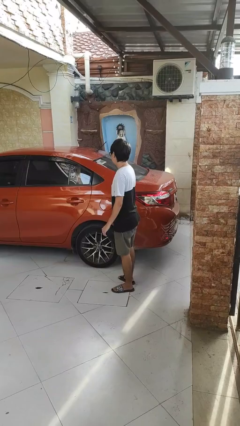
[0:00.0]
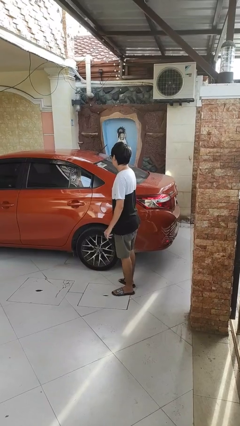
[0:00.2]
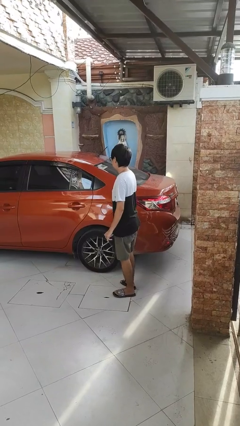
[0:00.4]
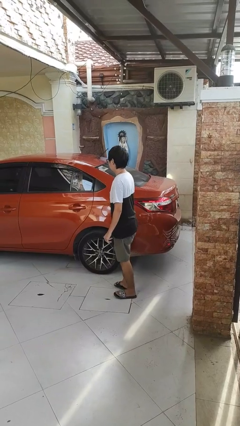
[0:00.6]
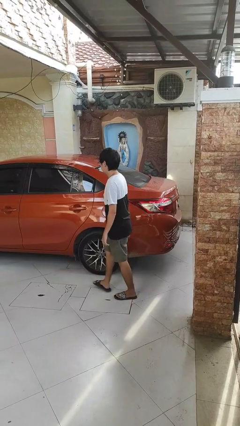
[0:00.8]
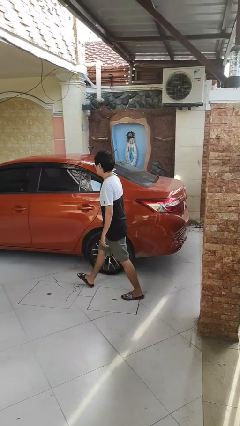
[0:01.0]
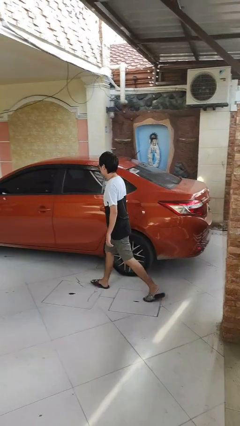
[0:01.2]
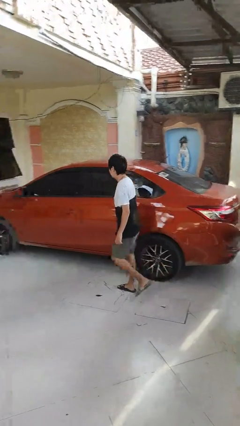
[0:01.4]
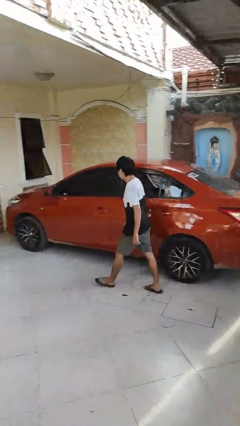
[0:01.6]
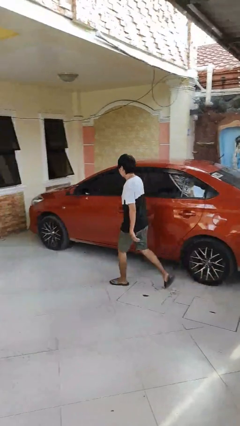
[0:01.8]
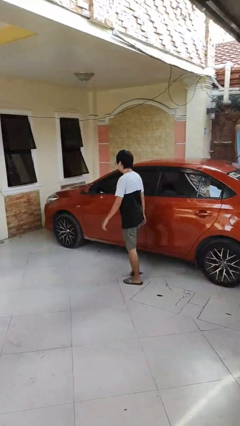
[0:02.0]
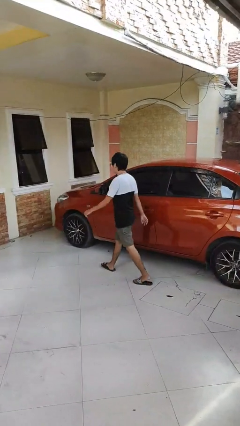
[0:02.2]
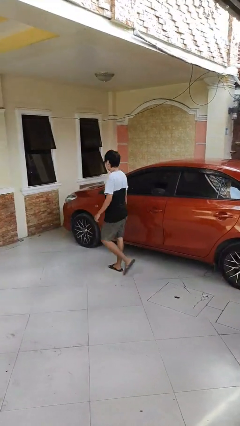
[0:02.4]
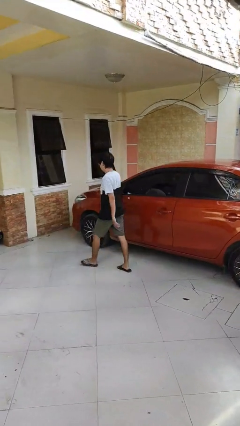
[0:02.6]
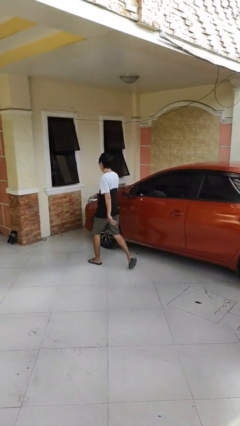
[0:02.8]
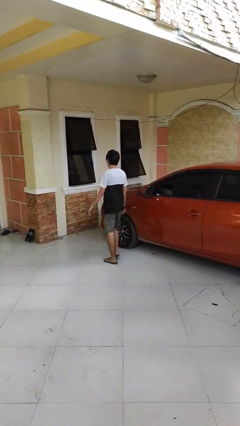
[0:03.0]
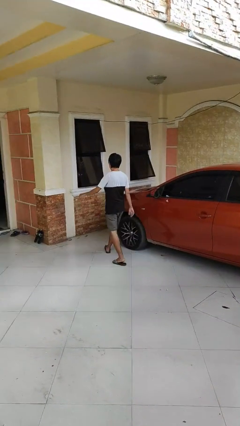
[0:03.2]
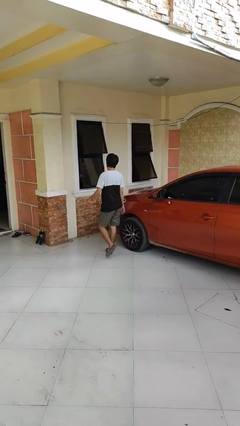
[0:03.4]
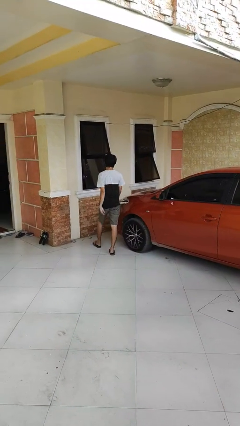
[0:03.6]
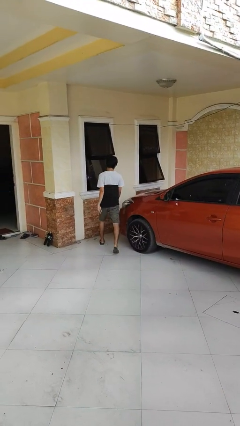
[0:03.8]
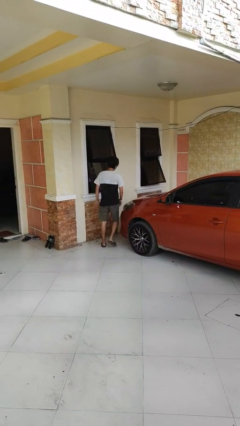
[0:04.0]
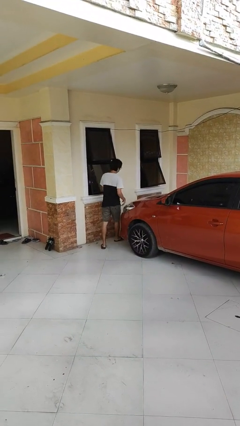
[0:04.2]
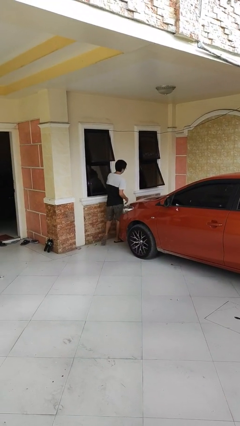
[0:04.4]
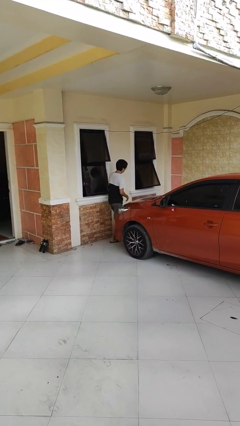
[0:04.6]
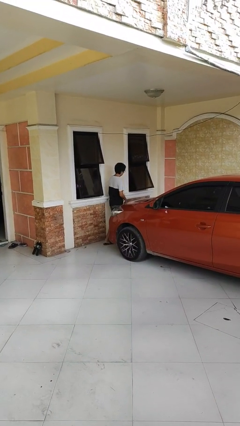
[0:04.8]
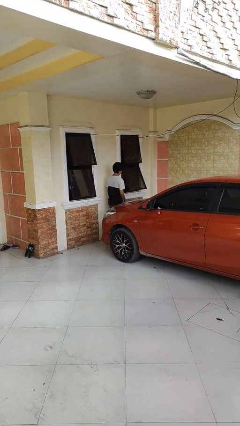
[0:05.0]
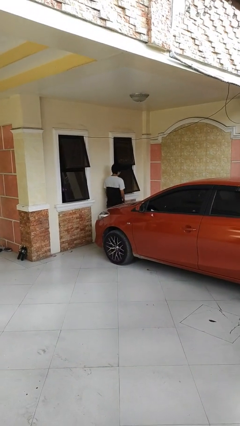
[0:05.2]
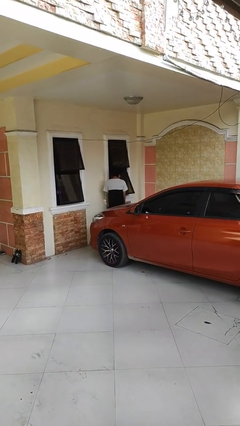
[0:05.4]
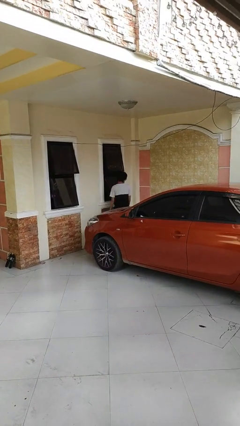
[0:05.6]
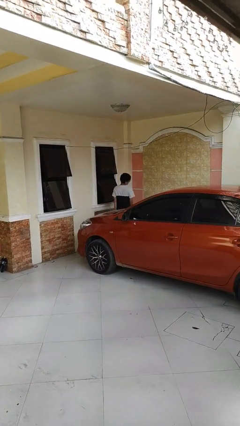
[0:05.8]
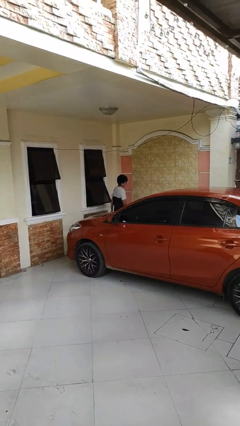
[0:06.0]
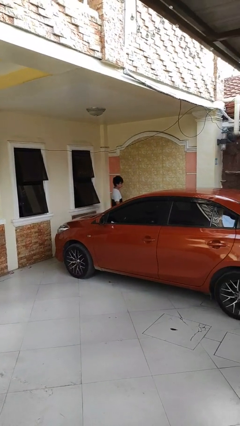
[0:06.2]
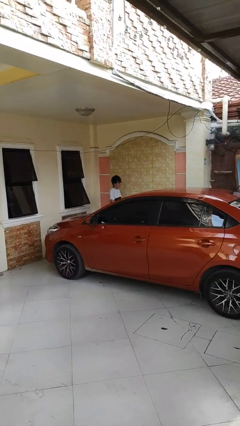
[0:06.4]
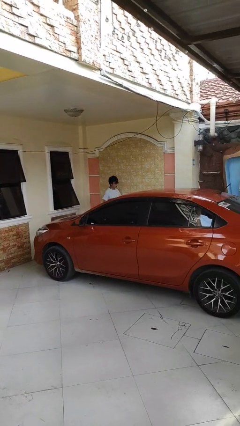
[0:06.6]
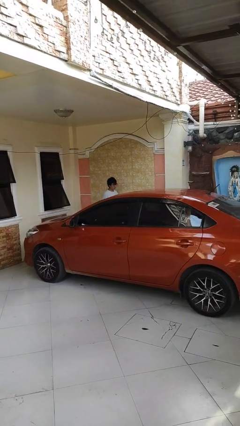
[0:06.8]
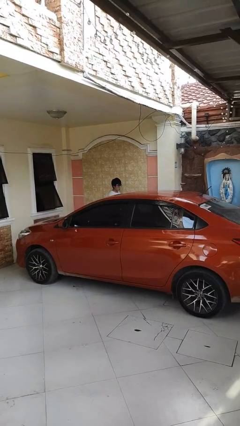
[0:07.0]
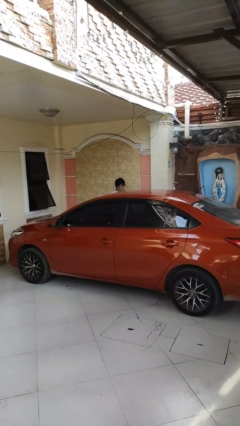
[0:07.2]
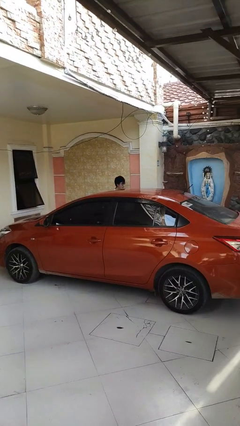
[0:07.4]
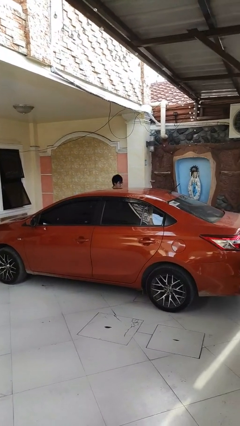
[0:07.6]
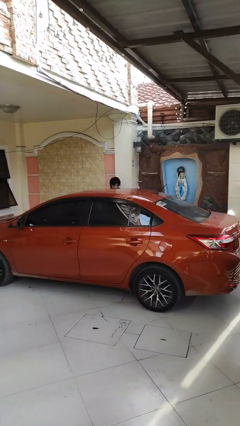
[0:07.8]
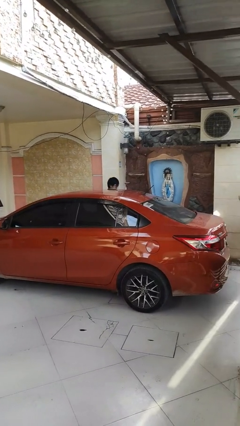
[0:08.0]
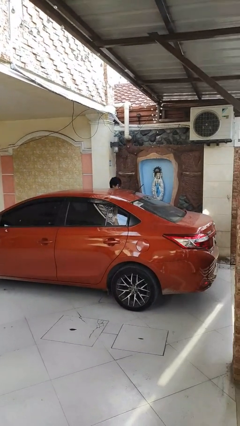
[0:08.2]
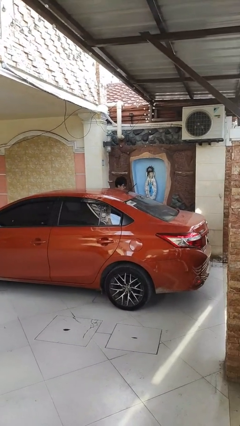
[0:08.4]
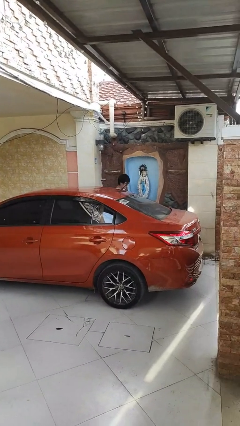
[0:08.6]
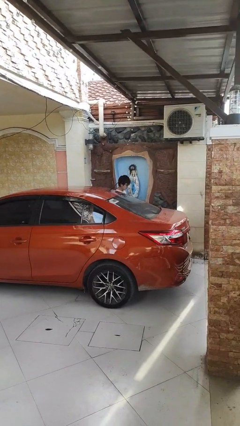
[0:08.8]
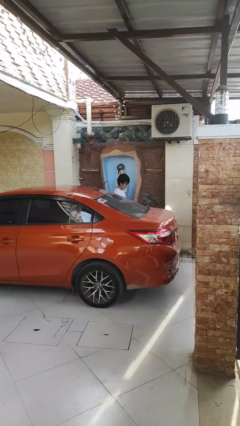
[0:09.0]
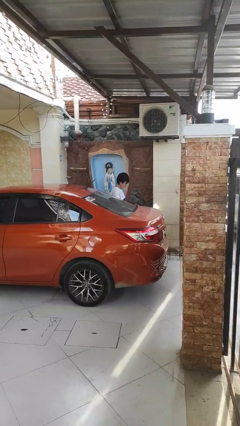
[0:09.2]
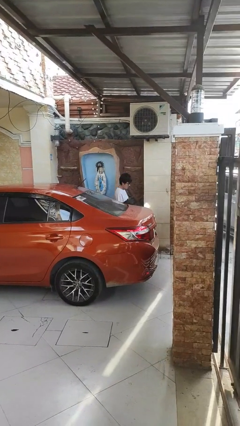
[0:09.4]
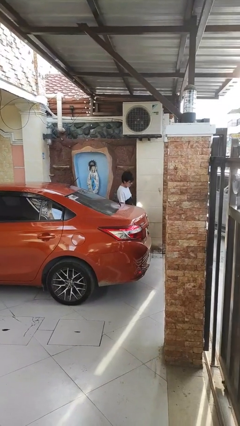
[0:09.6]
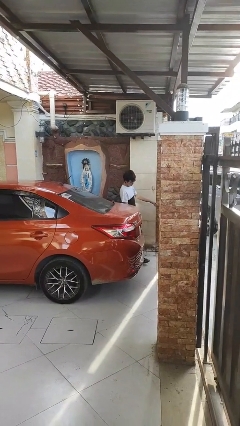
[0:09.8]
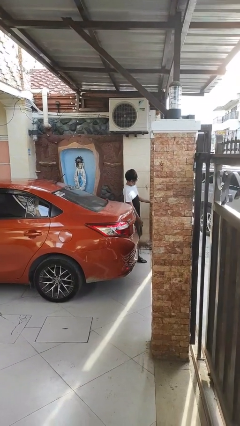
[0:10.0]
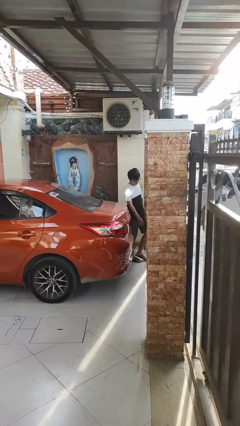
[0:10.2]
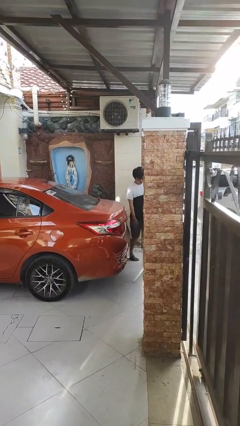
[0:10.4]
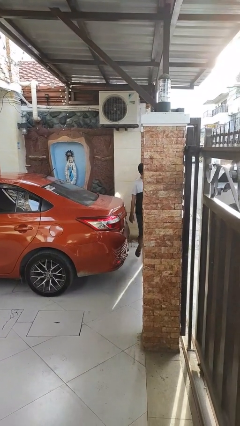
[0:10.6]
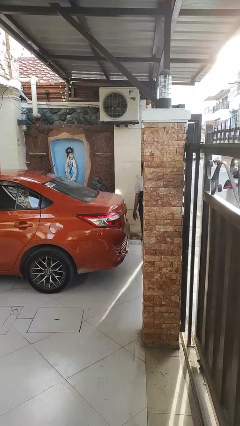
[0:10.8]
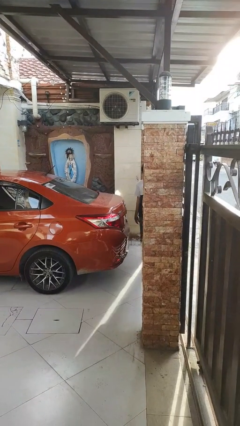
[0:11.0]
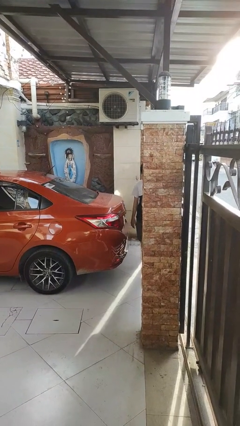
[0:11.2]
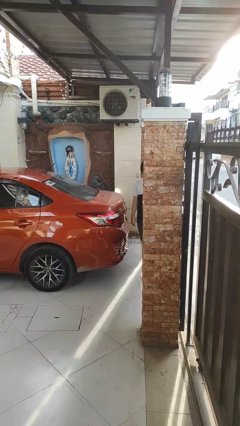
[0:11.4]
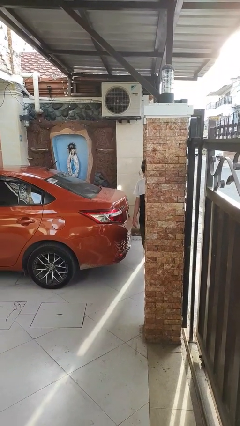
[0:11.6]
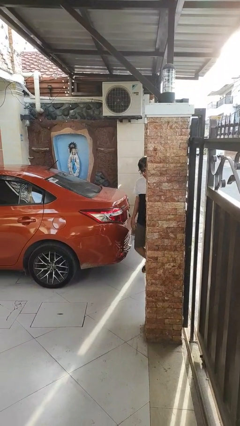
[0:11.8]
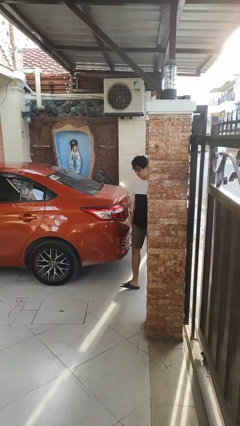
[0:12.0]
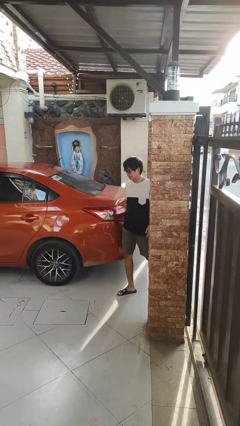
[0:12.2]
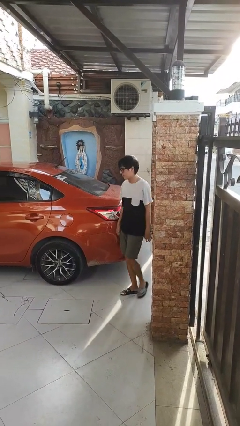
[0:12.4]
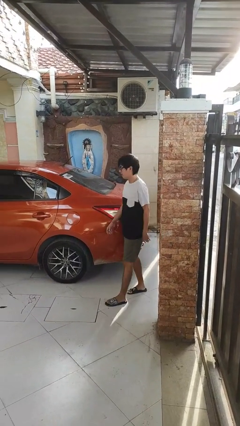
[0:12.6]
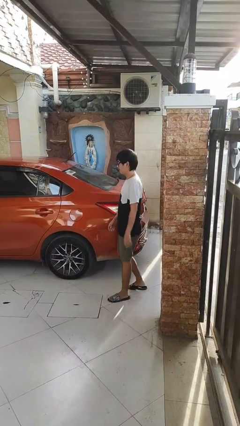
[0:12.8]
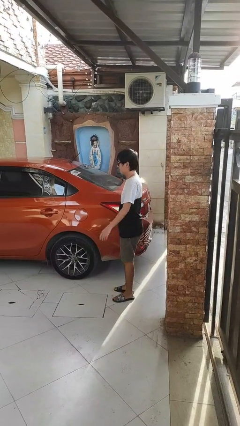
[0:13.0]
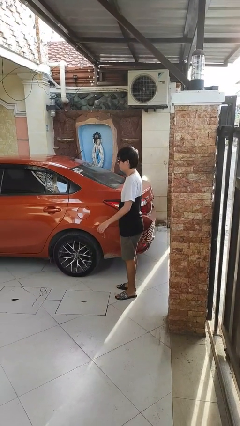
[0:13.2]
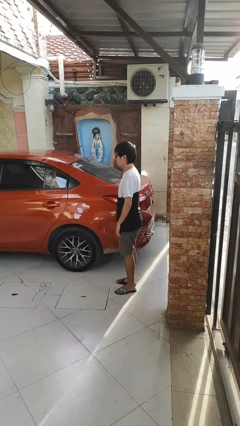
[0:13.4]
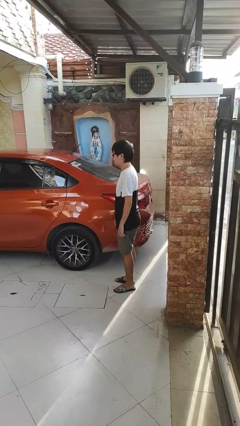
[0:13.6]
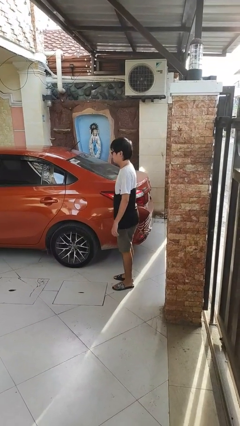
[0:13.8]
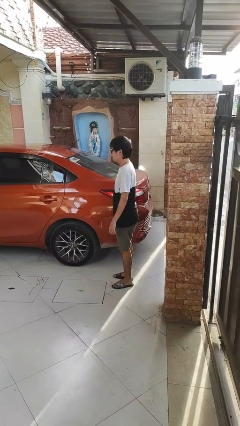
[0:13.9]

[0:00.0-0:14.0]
person walks around car

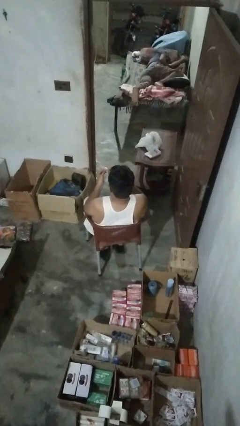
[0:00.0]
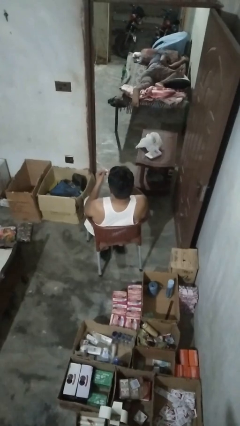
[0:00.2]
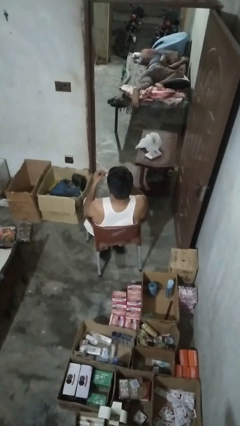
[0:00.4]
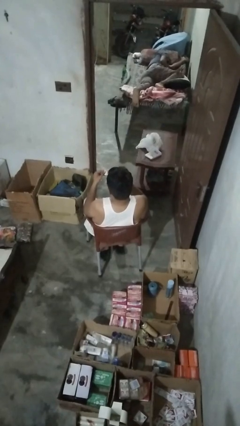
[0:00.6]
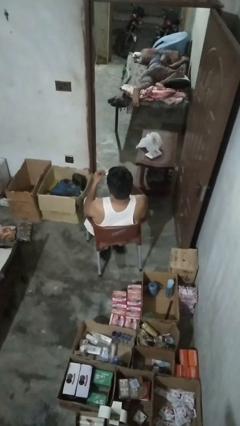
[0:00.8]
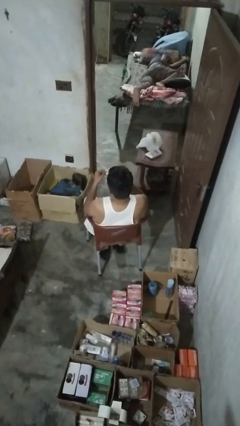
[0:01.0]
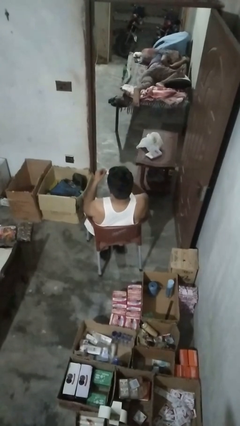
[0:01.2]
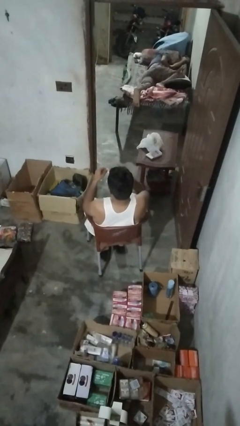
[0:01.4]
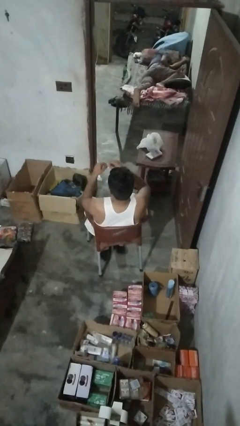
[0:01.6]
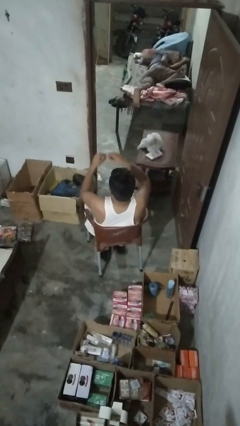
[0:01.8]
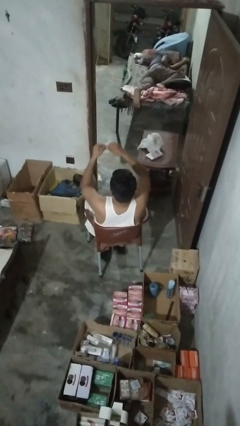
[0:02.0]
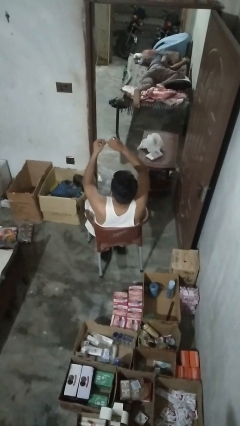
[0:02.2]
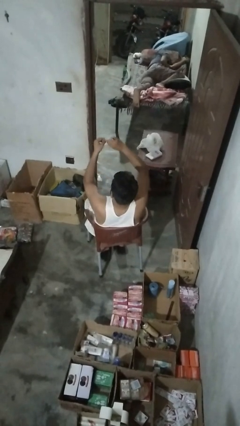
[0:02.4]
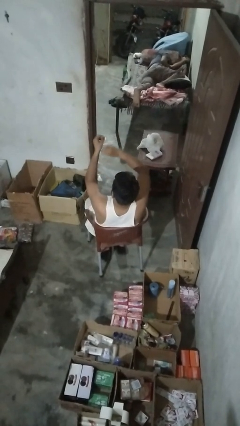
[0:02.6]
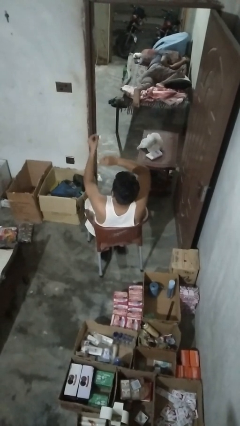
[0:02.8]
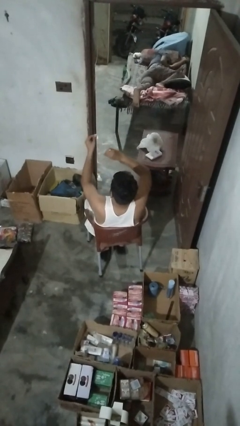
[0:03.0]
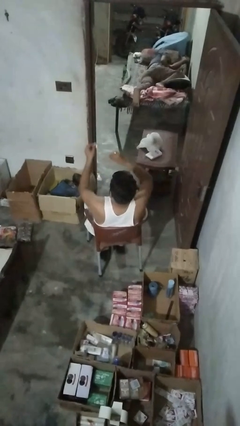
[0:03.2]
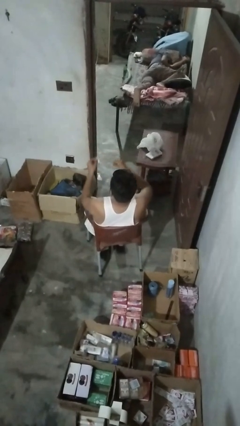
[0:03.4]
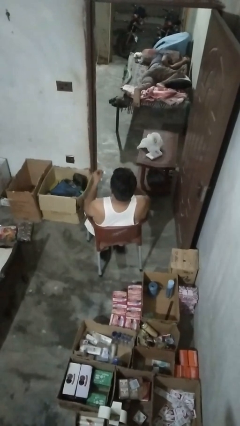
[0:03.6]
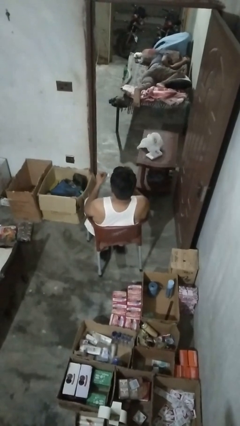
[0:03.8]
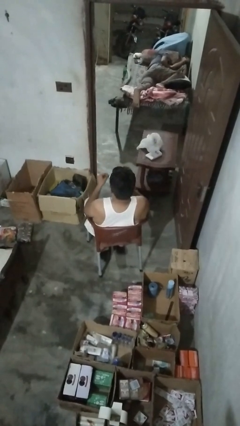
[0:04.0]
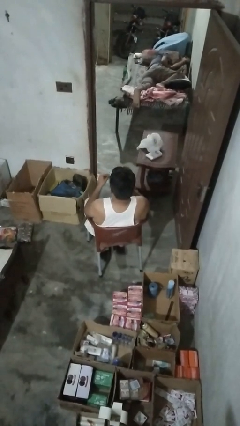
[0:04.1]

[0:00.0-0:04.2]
person tears paper
